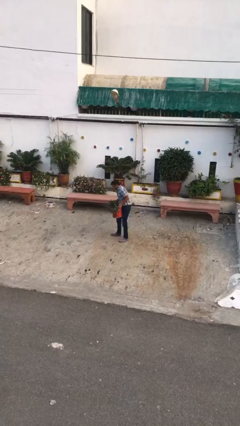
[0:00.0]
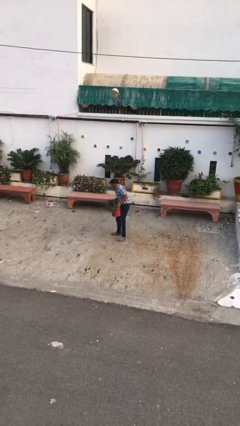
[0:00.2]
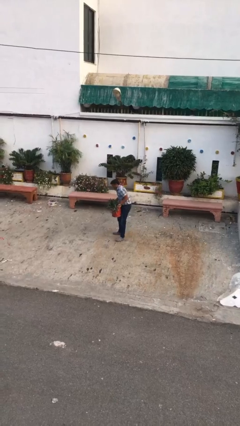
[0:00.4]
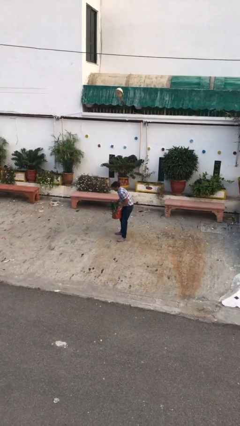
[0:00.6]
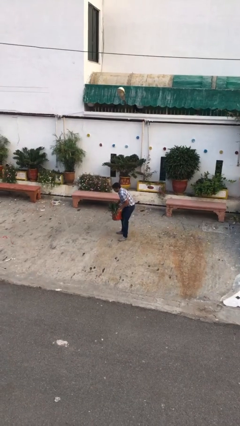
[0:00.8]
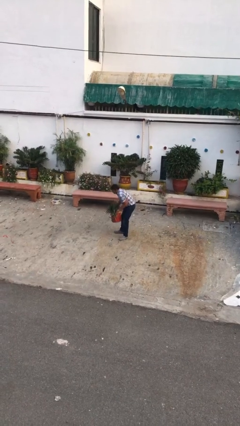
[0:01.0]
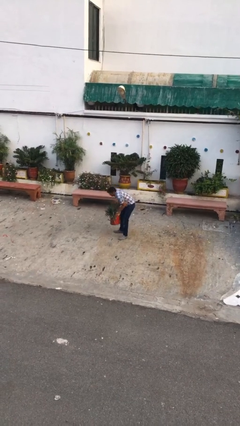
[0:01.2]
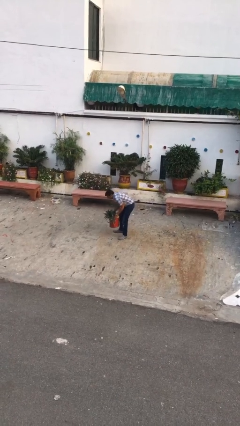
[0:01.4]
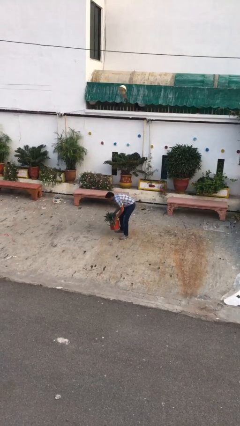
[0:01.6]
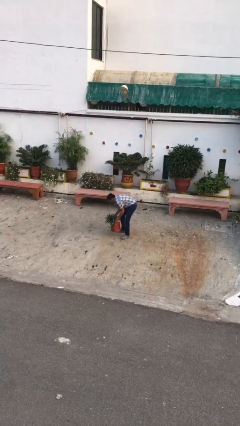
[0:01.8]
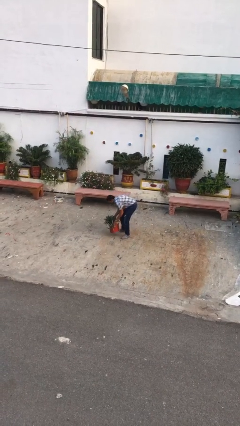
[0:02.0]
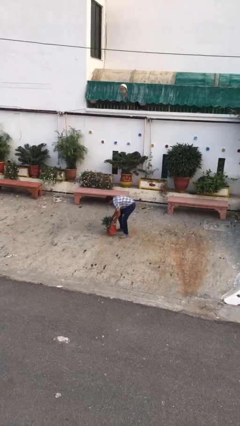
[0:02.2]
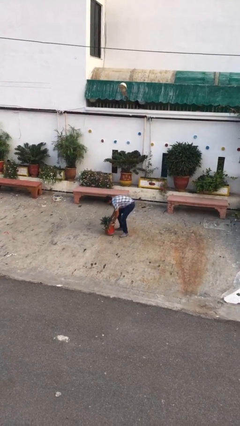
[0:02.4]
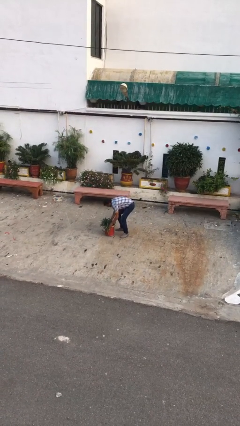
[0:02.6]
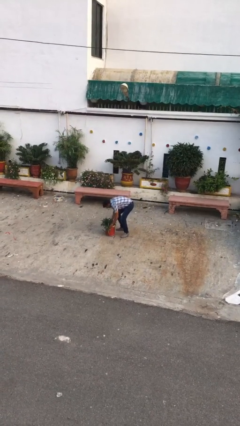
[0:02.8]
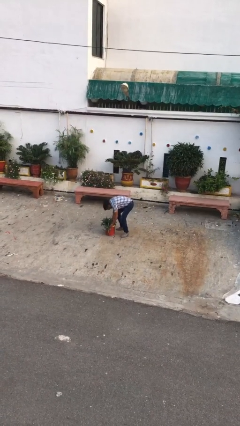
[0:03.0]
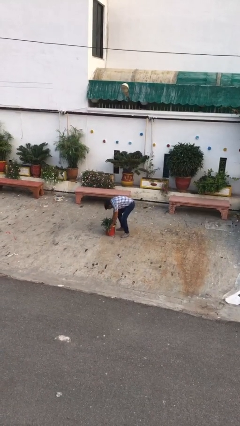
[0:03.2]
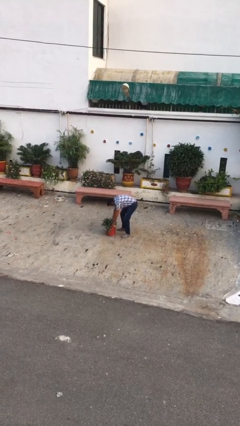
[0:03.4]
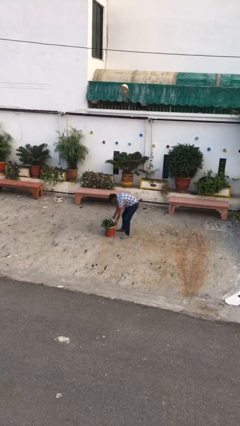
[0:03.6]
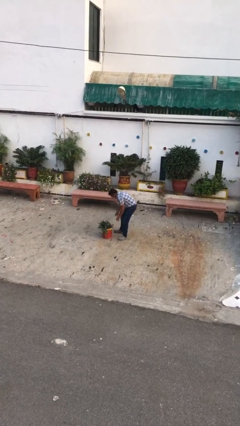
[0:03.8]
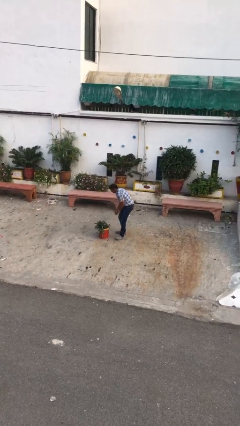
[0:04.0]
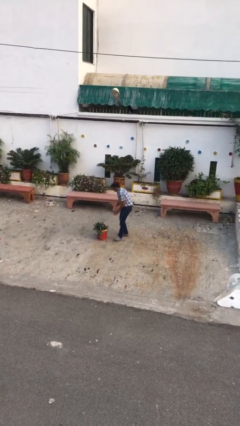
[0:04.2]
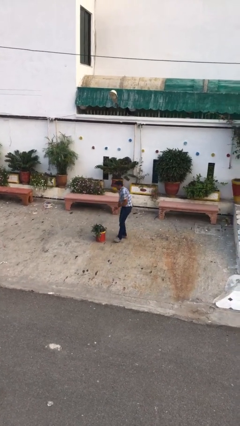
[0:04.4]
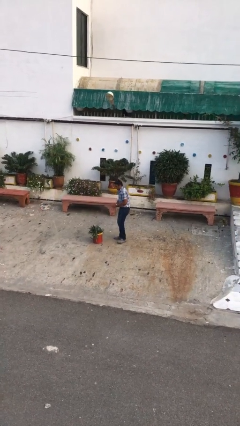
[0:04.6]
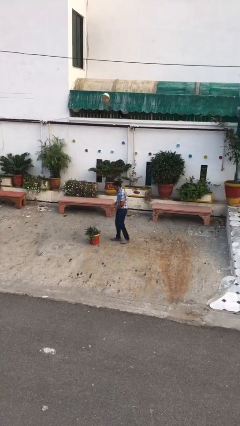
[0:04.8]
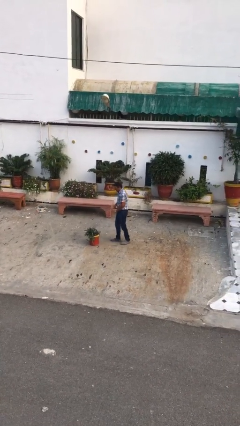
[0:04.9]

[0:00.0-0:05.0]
person puts down object on floor

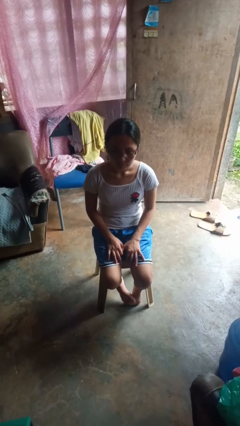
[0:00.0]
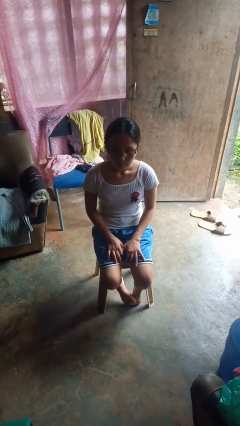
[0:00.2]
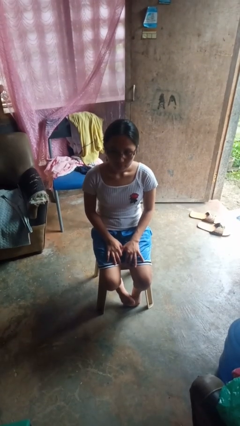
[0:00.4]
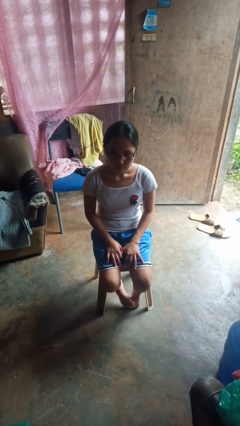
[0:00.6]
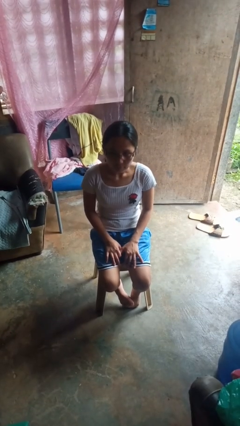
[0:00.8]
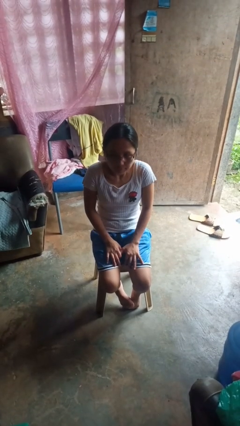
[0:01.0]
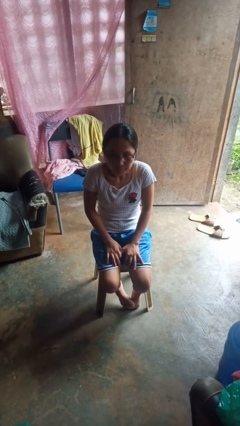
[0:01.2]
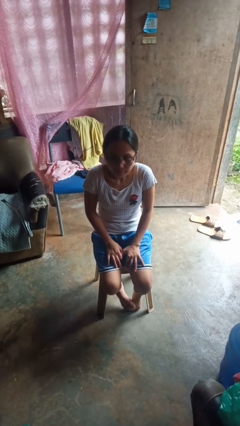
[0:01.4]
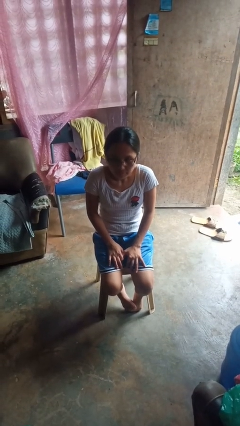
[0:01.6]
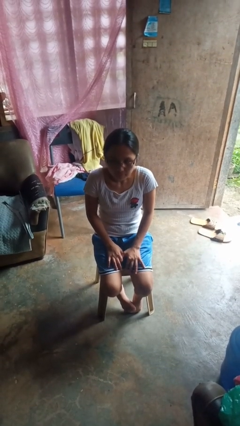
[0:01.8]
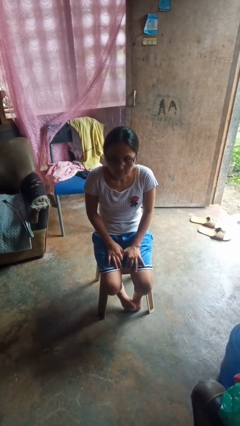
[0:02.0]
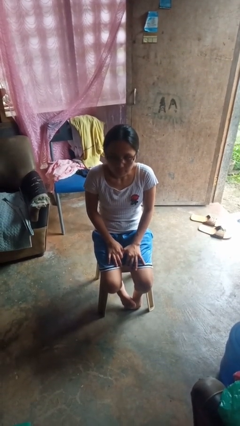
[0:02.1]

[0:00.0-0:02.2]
person shrugs

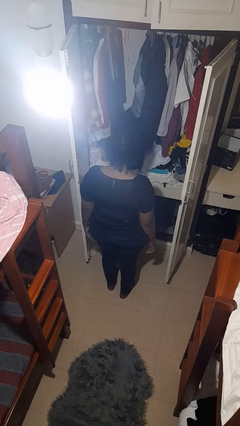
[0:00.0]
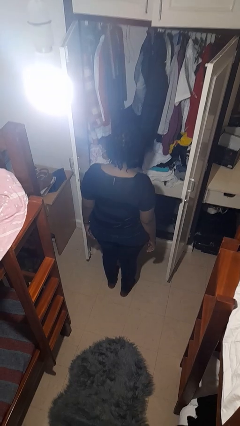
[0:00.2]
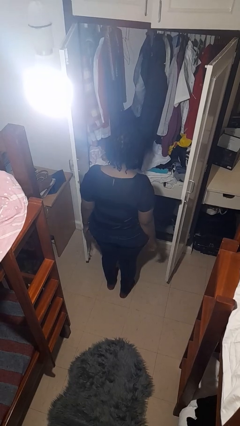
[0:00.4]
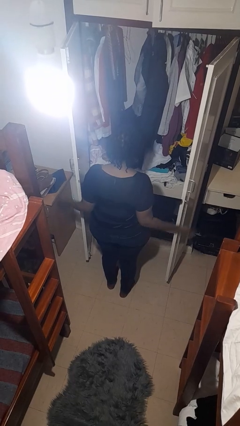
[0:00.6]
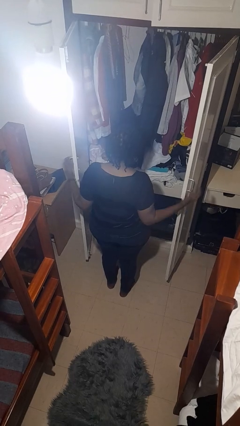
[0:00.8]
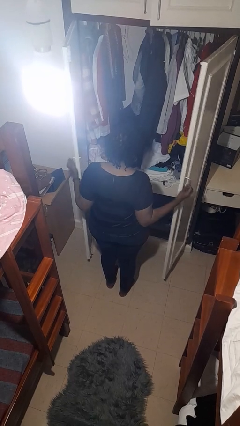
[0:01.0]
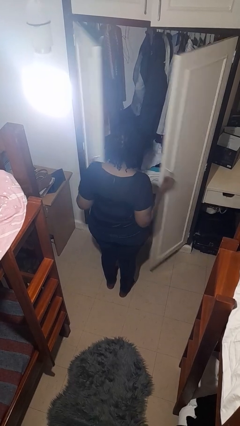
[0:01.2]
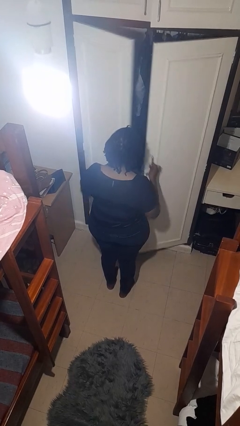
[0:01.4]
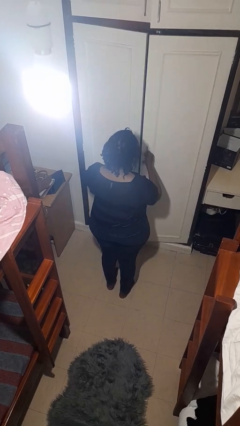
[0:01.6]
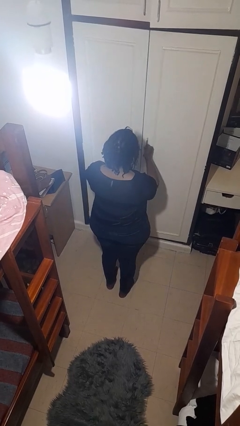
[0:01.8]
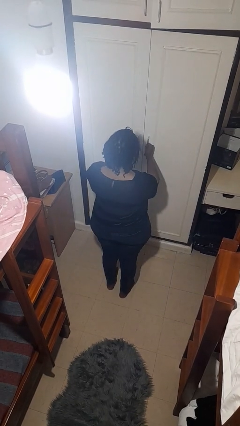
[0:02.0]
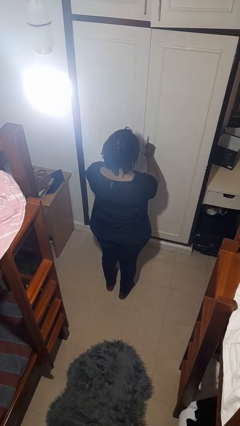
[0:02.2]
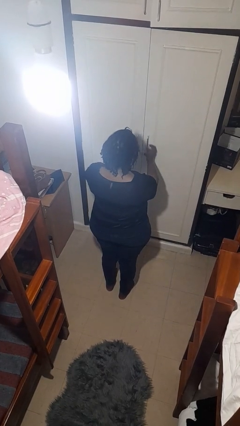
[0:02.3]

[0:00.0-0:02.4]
person closes closet door

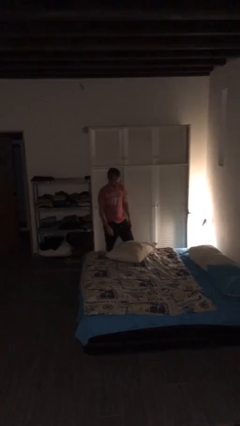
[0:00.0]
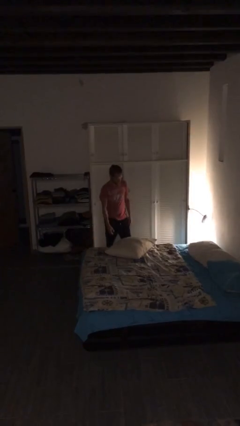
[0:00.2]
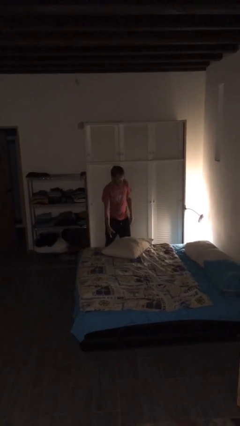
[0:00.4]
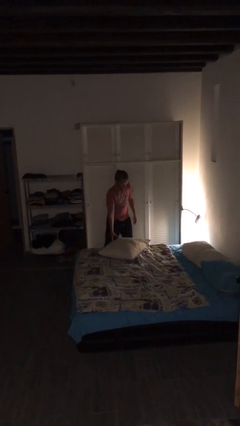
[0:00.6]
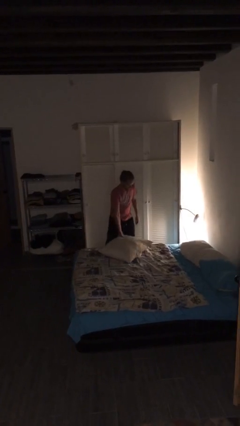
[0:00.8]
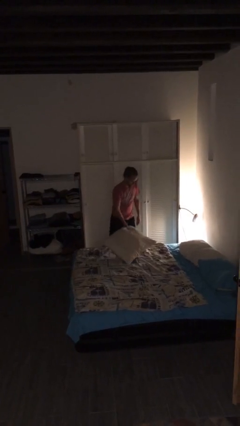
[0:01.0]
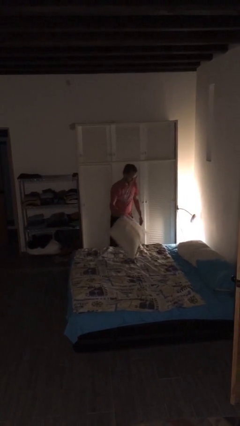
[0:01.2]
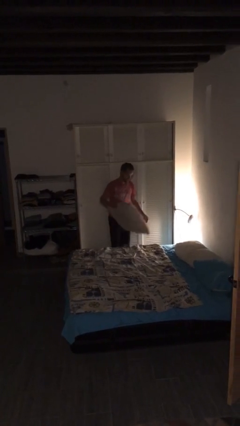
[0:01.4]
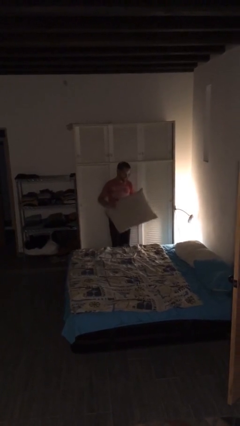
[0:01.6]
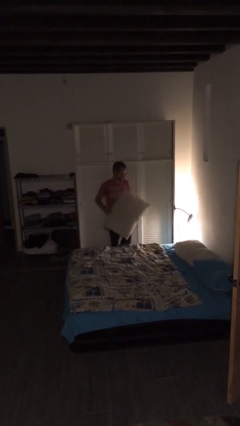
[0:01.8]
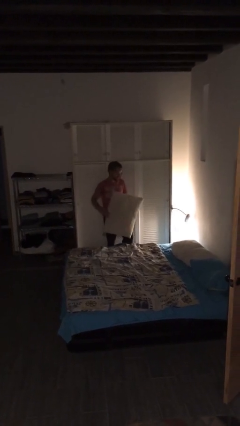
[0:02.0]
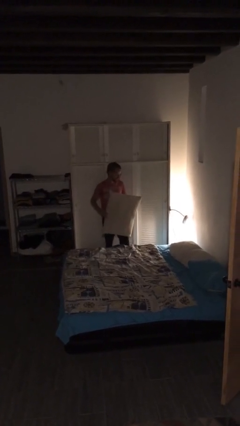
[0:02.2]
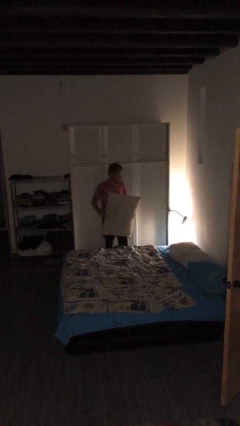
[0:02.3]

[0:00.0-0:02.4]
person picks up object from bed

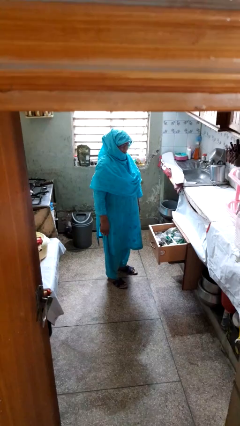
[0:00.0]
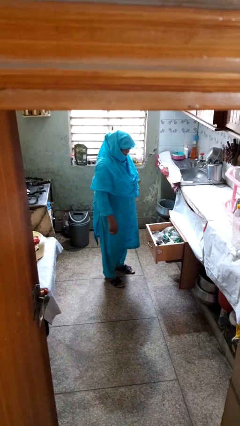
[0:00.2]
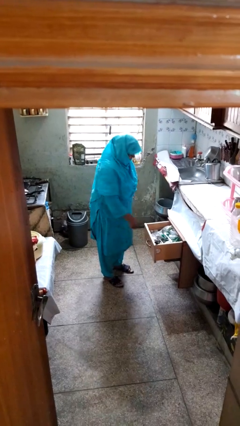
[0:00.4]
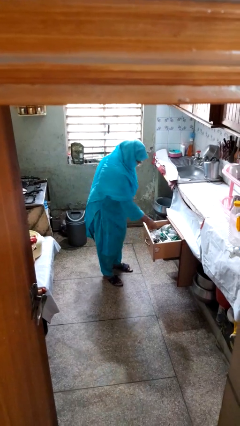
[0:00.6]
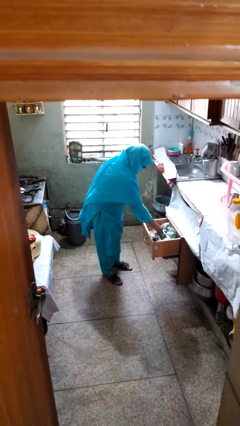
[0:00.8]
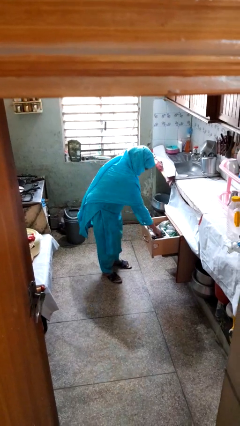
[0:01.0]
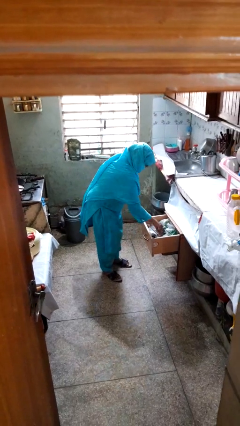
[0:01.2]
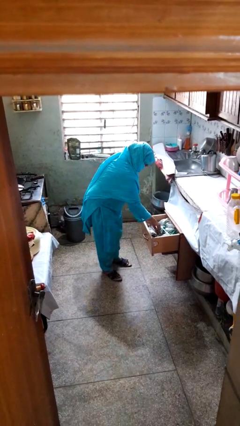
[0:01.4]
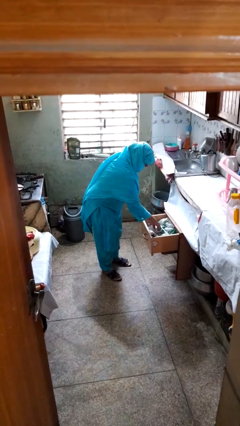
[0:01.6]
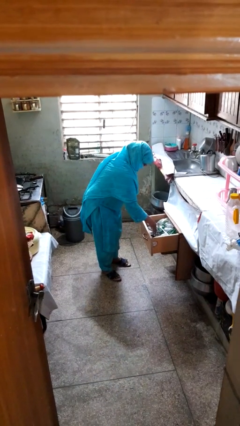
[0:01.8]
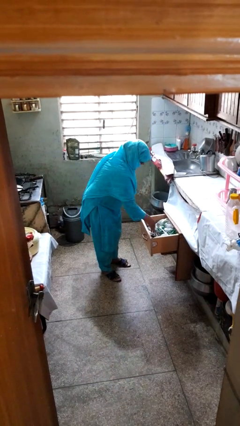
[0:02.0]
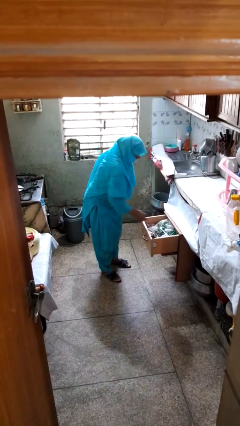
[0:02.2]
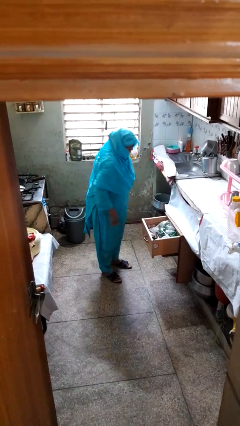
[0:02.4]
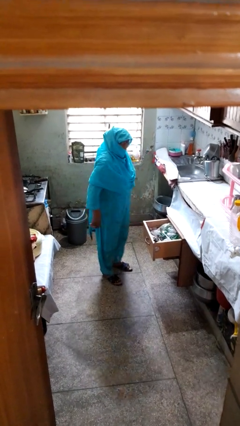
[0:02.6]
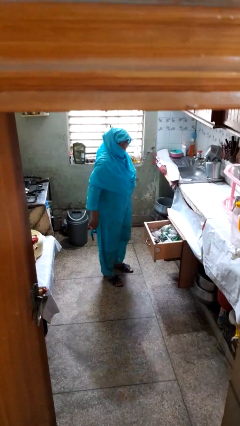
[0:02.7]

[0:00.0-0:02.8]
person searches in kitchen drawer

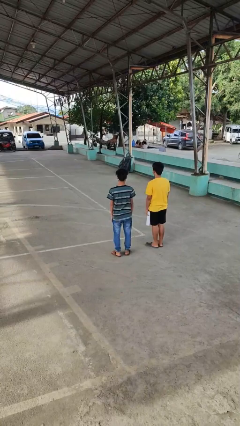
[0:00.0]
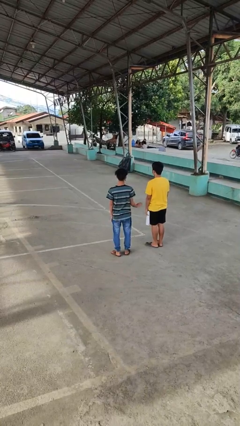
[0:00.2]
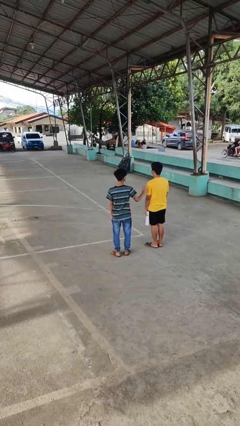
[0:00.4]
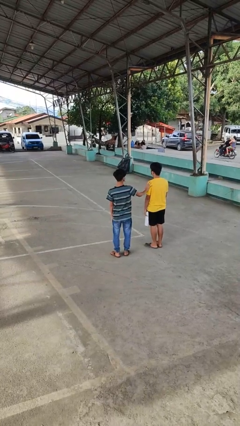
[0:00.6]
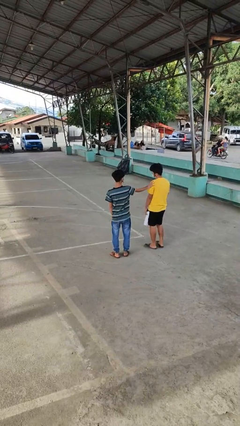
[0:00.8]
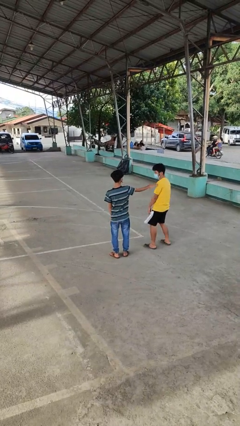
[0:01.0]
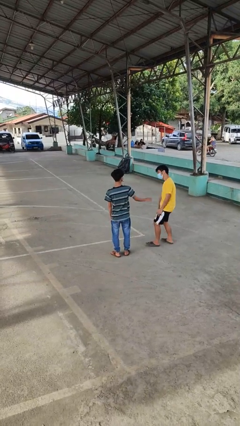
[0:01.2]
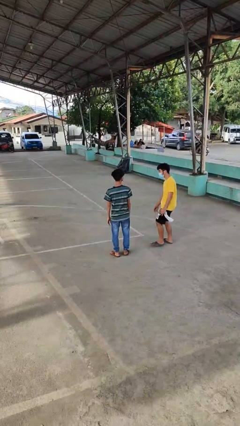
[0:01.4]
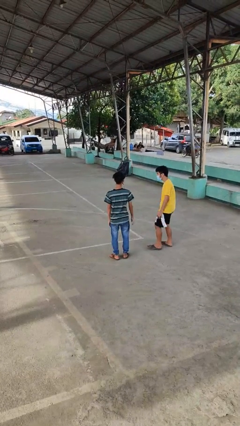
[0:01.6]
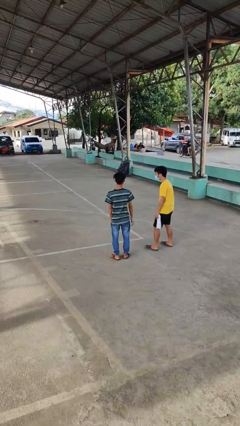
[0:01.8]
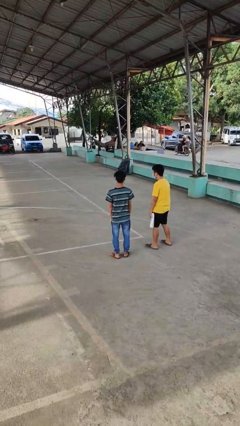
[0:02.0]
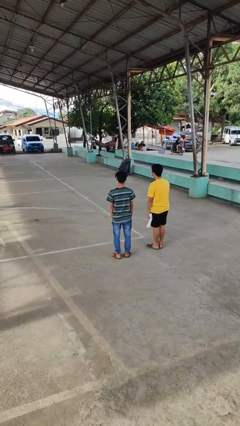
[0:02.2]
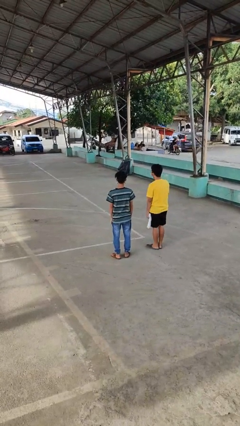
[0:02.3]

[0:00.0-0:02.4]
person shoves person
